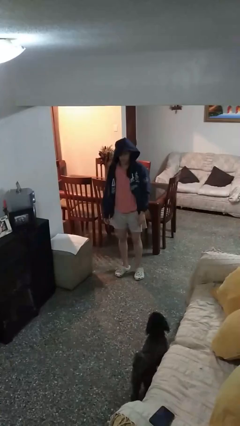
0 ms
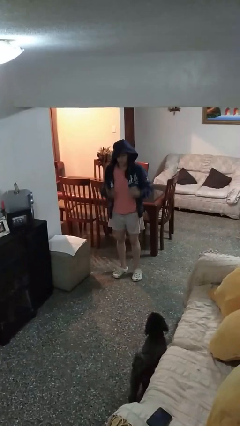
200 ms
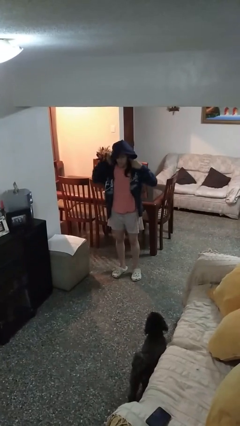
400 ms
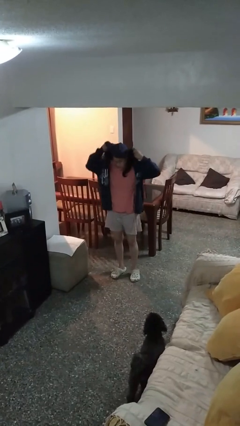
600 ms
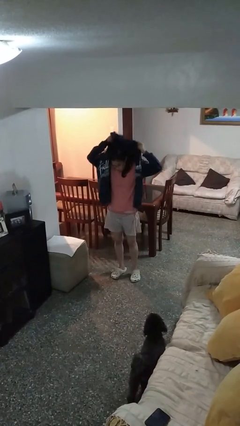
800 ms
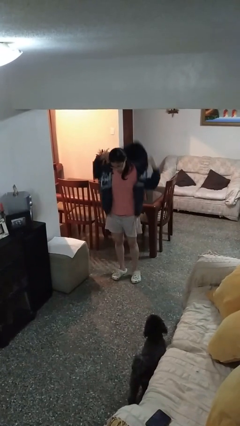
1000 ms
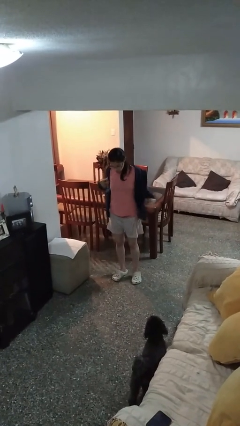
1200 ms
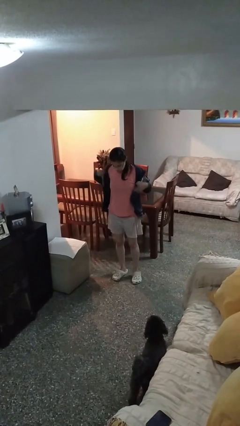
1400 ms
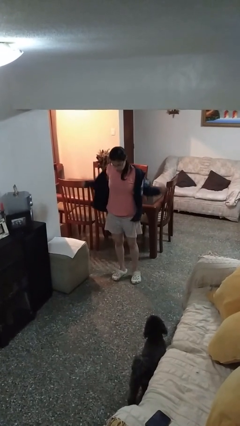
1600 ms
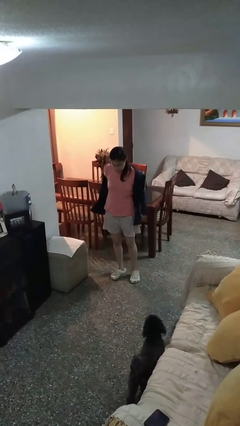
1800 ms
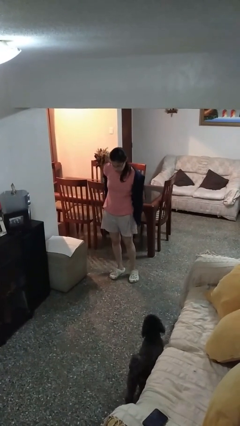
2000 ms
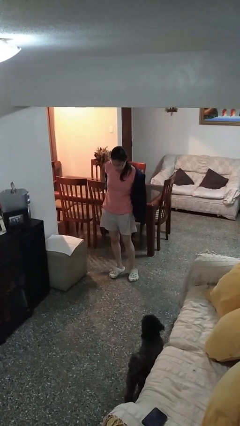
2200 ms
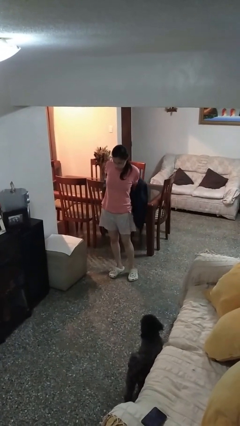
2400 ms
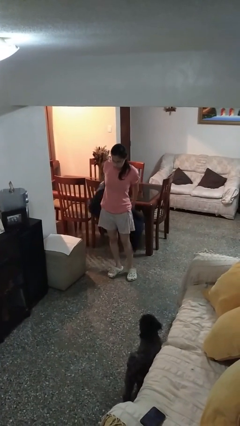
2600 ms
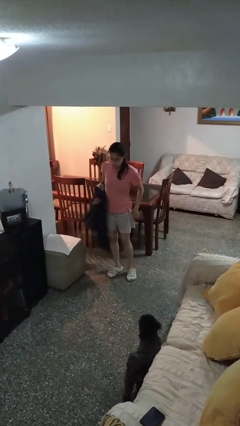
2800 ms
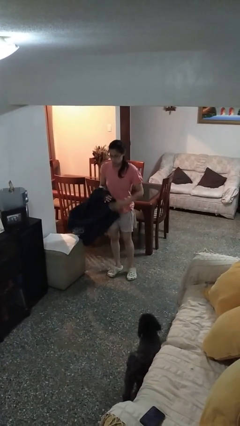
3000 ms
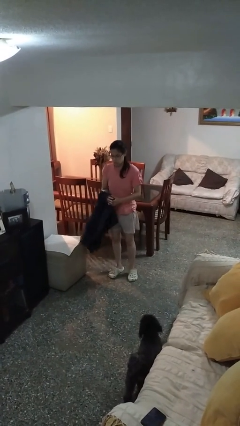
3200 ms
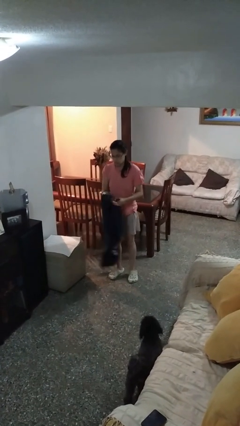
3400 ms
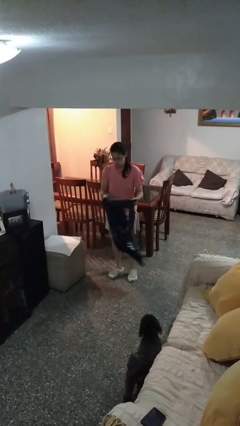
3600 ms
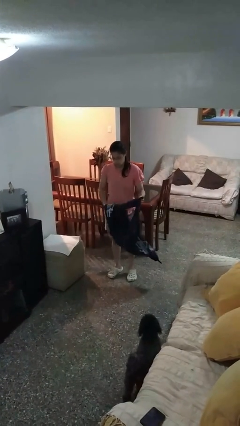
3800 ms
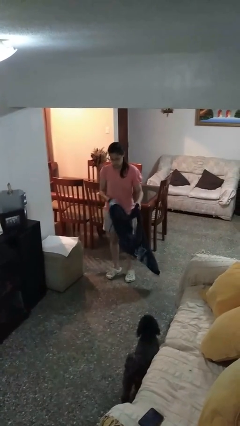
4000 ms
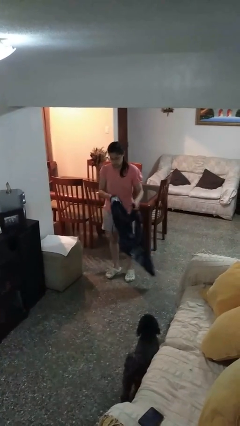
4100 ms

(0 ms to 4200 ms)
person takes off hoodie

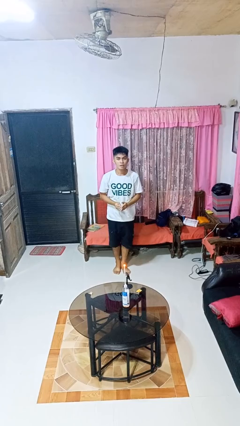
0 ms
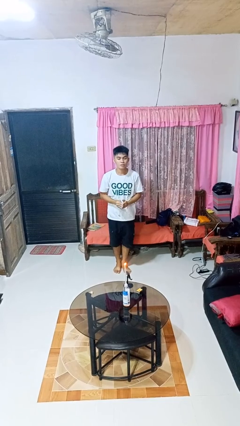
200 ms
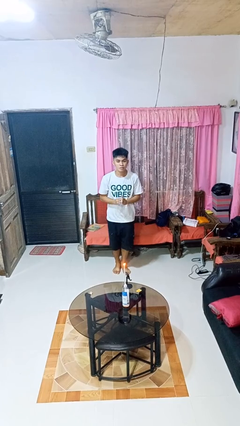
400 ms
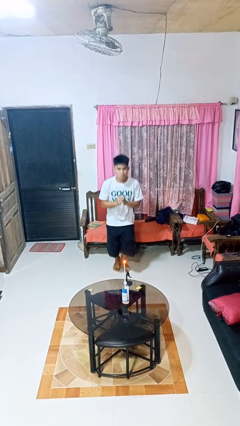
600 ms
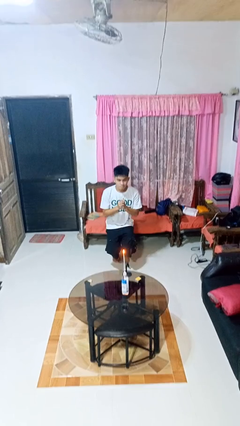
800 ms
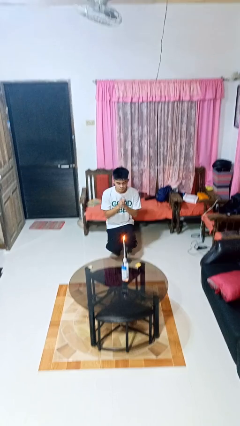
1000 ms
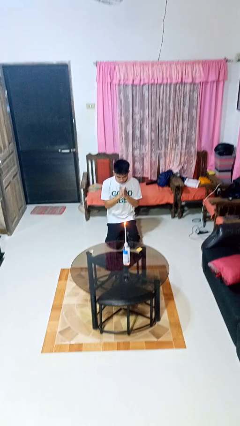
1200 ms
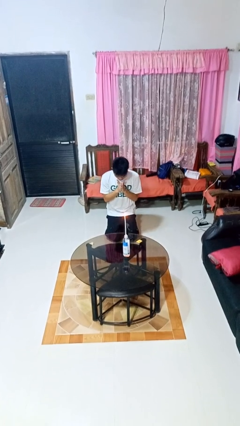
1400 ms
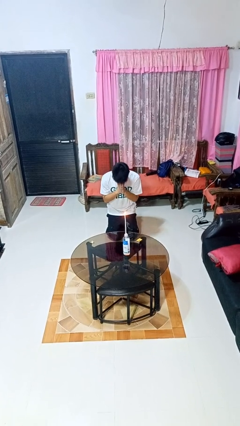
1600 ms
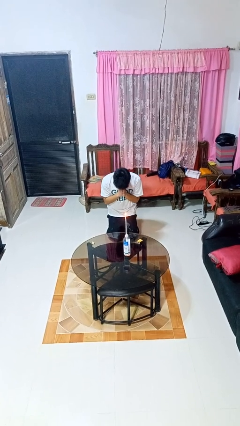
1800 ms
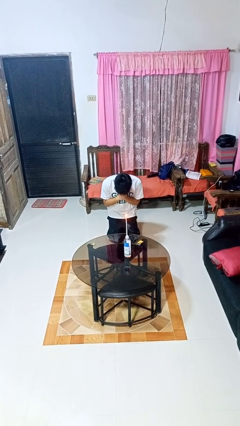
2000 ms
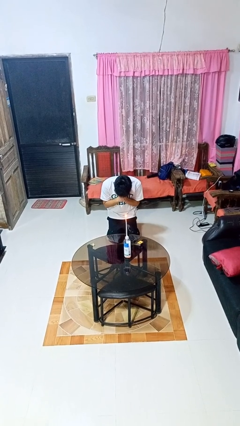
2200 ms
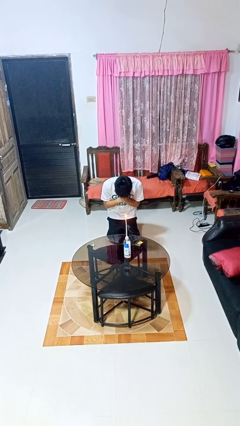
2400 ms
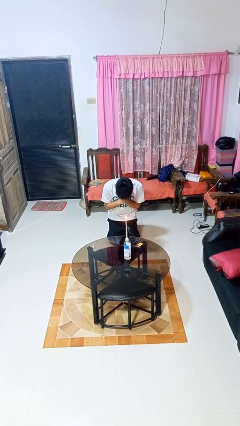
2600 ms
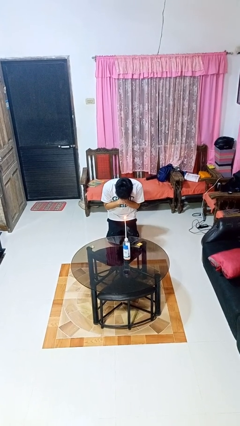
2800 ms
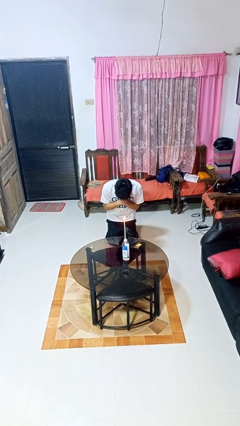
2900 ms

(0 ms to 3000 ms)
person prays

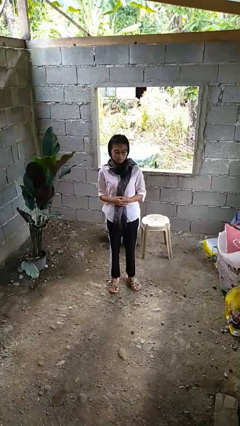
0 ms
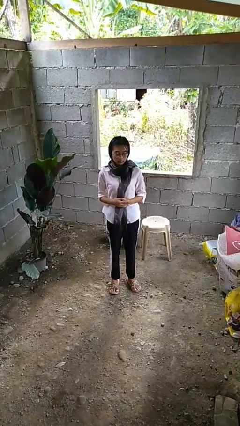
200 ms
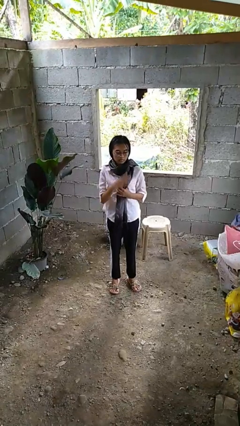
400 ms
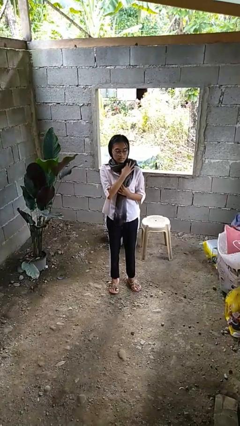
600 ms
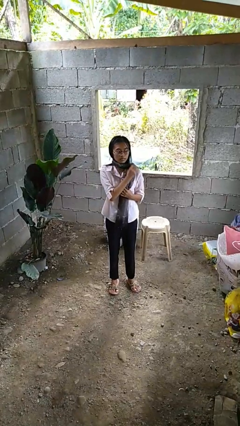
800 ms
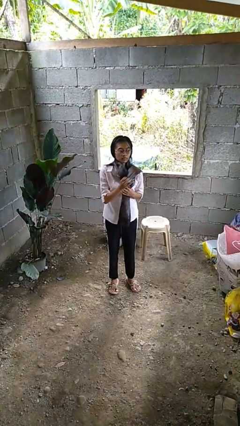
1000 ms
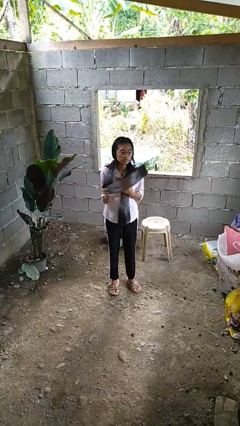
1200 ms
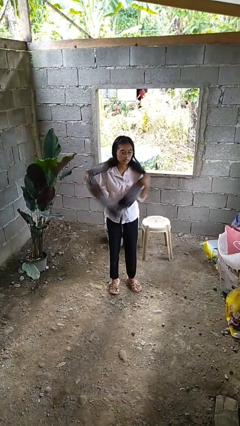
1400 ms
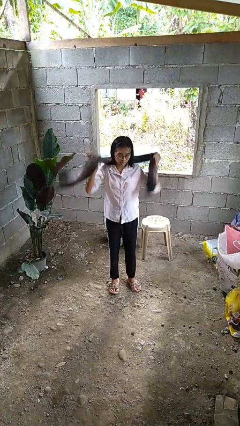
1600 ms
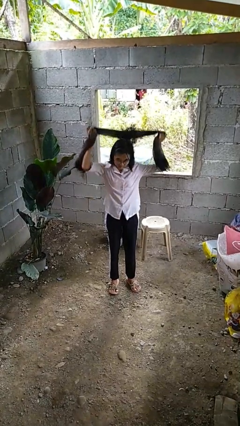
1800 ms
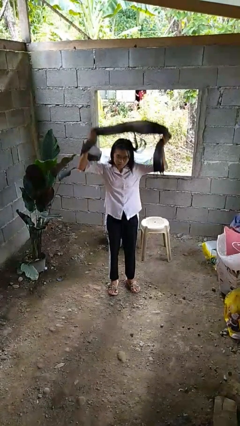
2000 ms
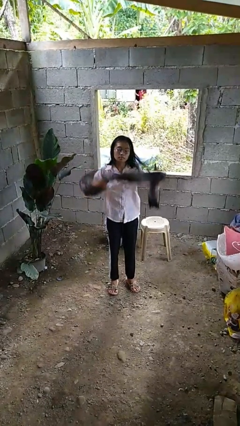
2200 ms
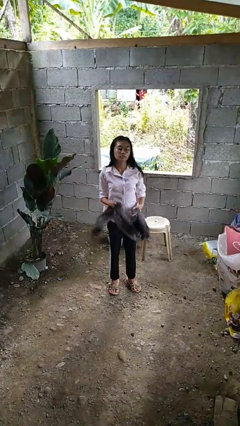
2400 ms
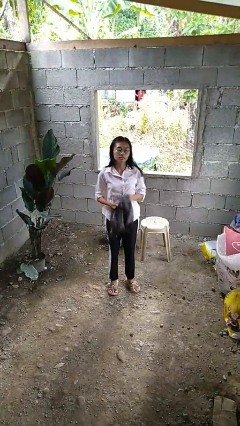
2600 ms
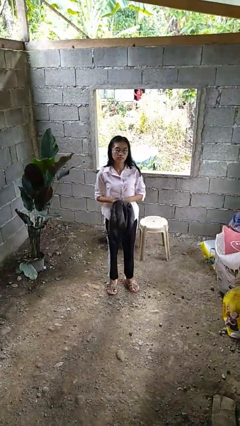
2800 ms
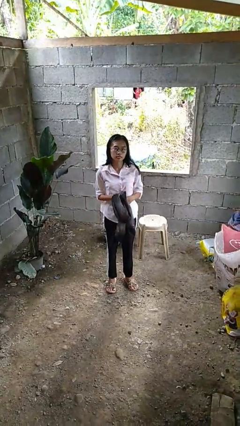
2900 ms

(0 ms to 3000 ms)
person takes off scarf

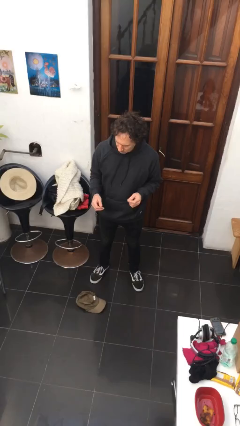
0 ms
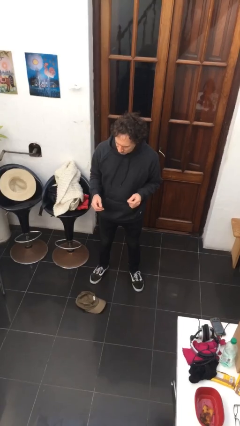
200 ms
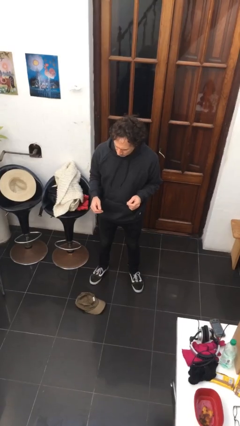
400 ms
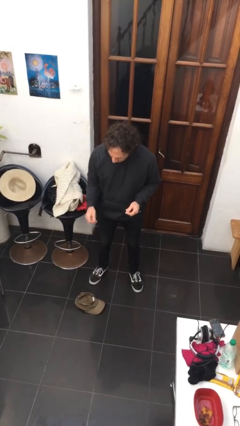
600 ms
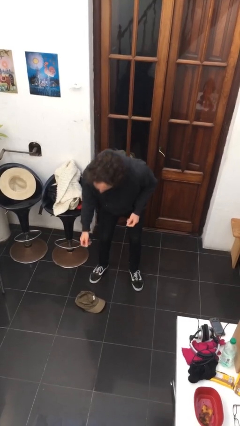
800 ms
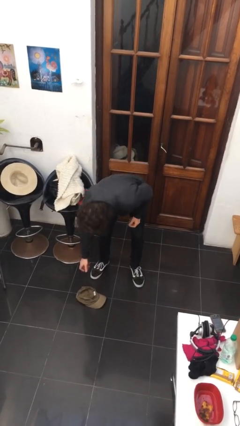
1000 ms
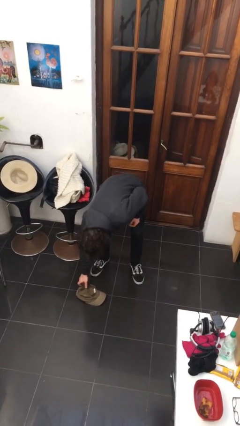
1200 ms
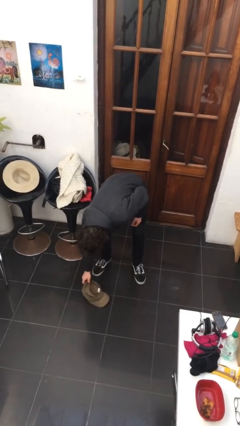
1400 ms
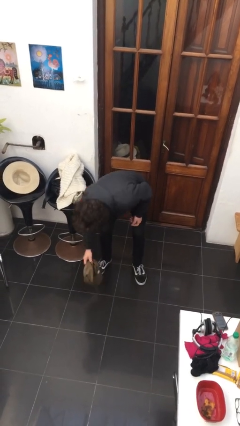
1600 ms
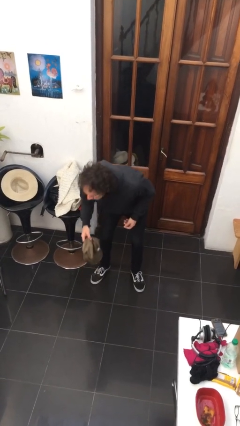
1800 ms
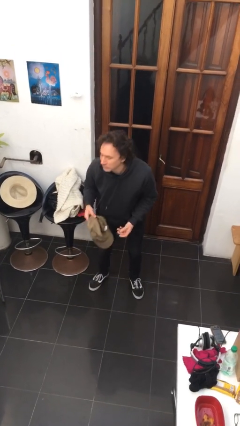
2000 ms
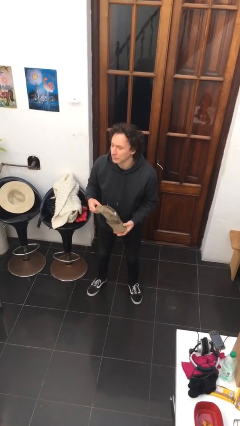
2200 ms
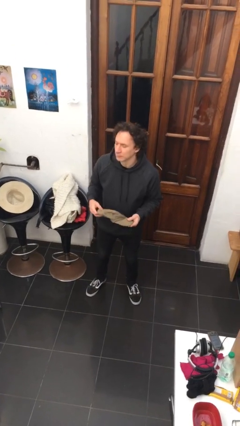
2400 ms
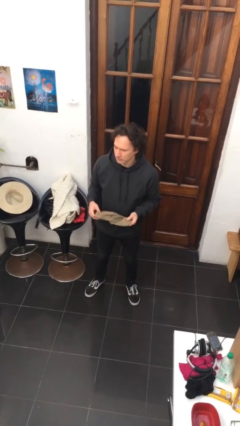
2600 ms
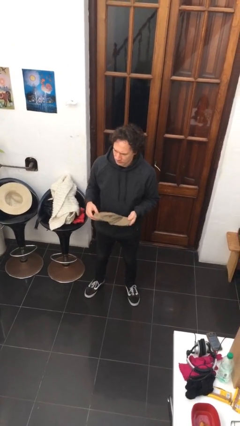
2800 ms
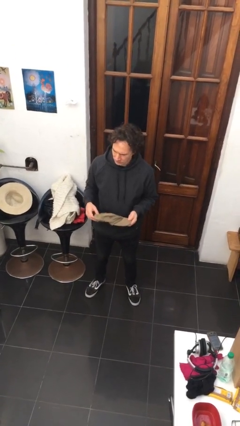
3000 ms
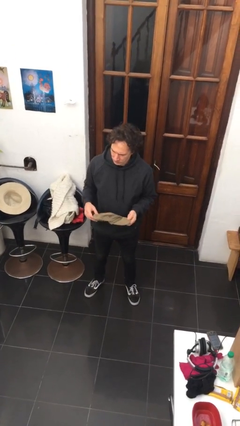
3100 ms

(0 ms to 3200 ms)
person picks up object from floor

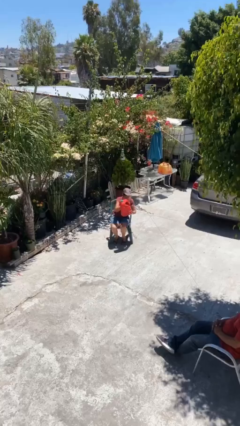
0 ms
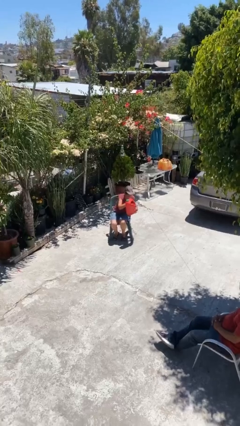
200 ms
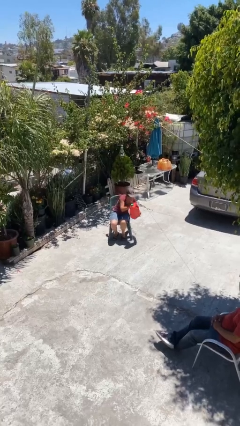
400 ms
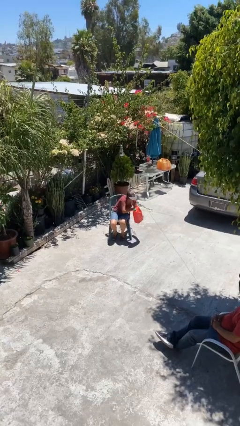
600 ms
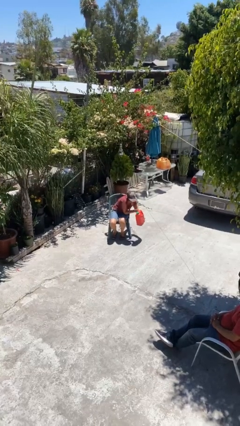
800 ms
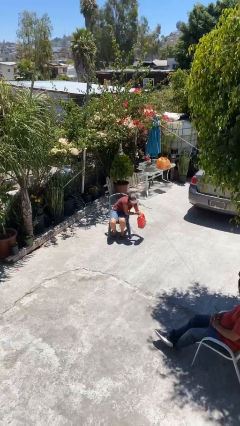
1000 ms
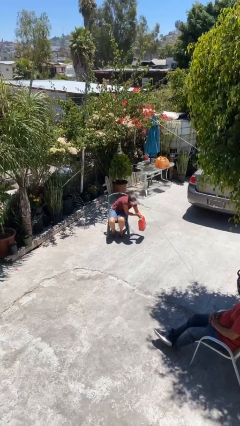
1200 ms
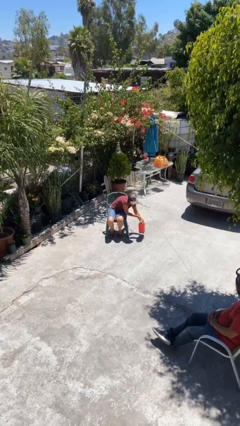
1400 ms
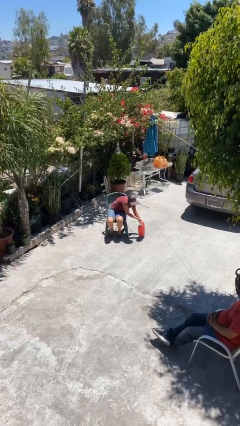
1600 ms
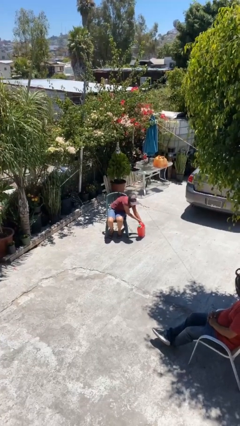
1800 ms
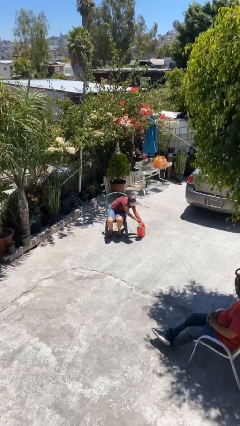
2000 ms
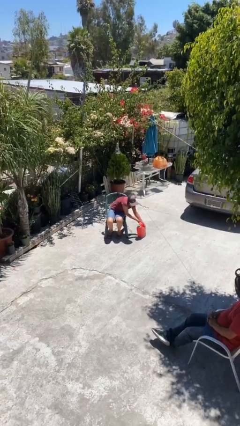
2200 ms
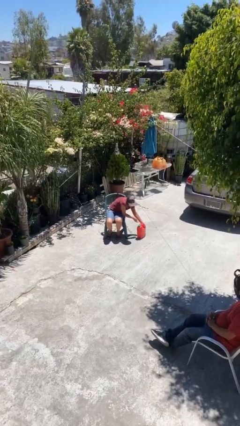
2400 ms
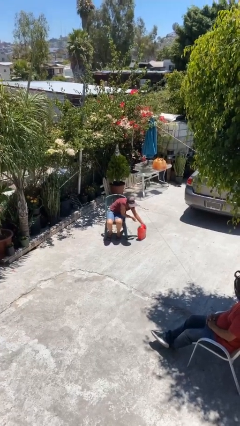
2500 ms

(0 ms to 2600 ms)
person puts down object on floor

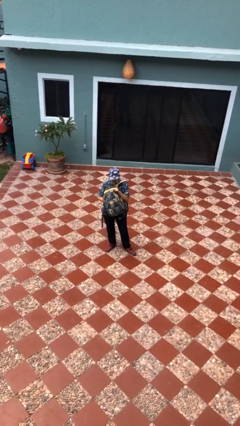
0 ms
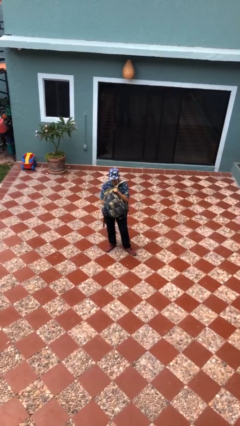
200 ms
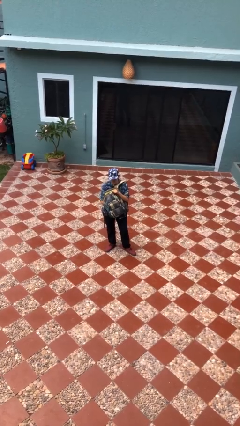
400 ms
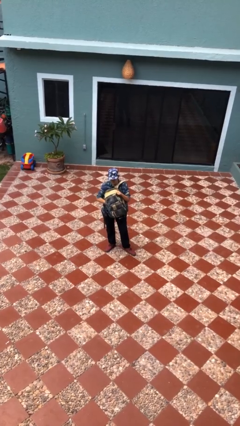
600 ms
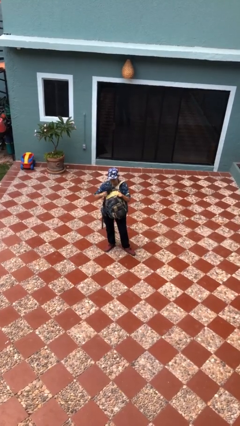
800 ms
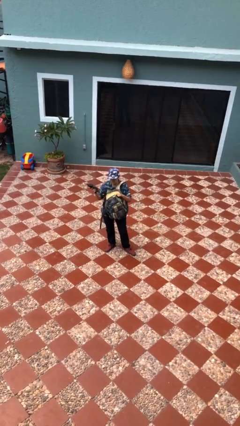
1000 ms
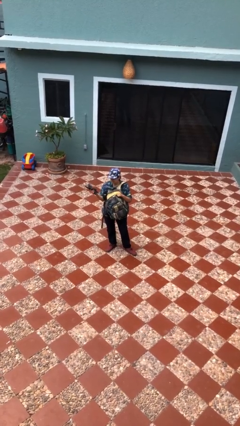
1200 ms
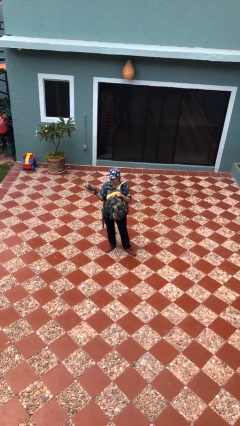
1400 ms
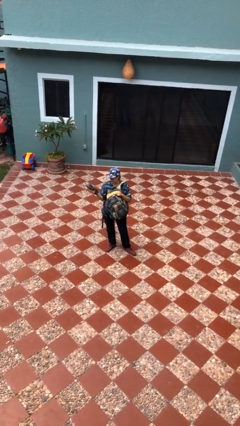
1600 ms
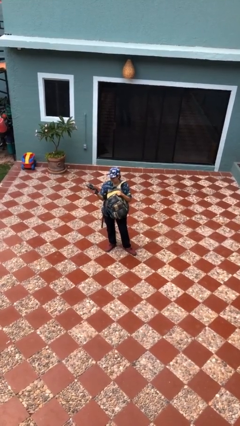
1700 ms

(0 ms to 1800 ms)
person takes object from backpack
